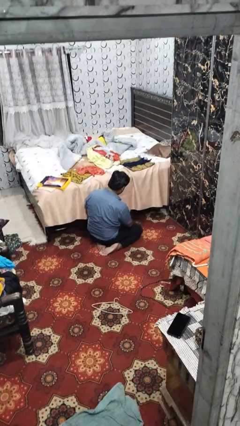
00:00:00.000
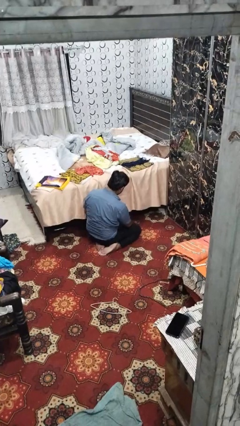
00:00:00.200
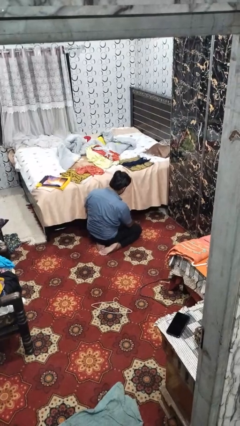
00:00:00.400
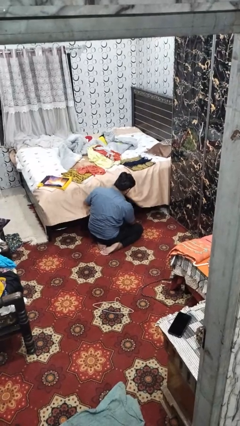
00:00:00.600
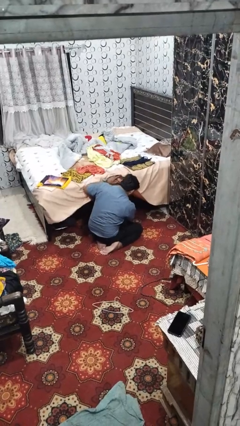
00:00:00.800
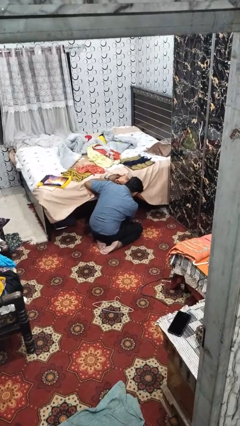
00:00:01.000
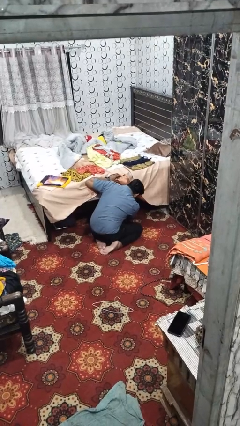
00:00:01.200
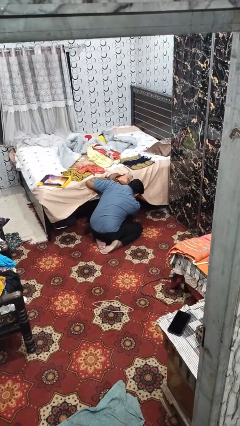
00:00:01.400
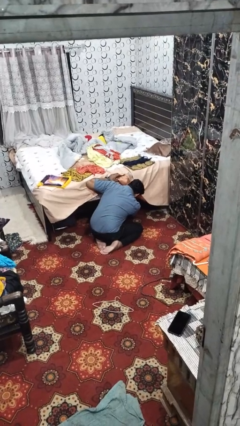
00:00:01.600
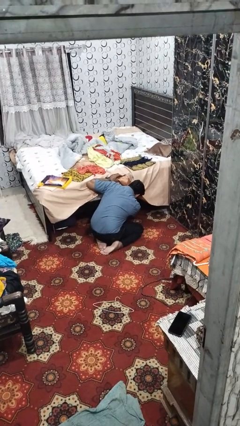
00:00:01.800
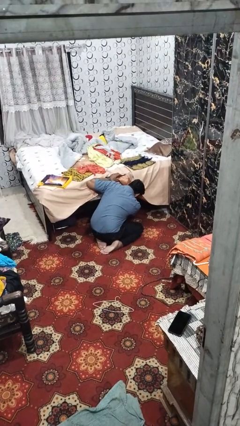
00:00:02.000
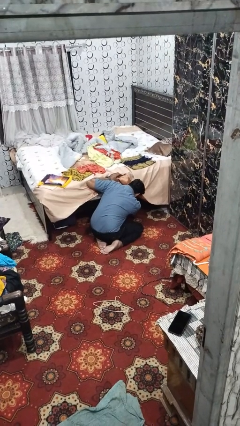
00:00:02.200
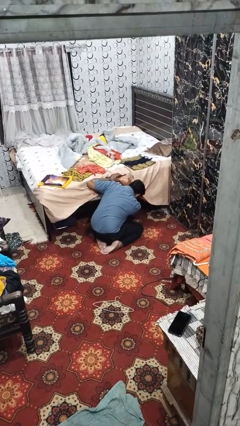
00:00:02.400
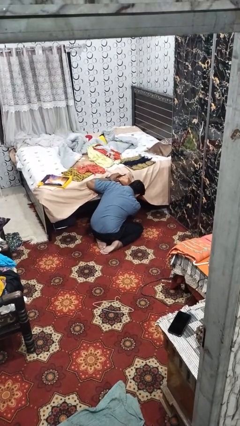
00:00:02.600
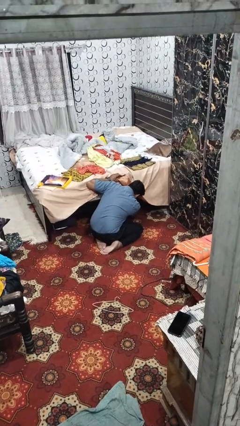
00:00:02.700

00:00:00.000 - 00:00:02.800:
person searches under bed

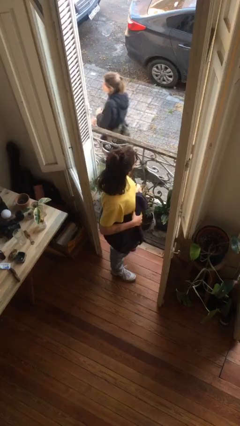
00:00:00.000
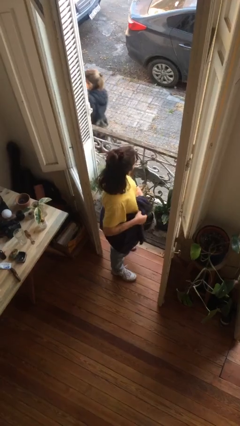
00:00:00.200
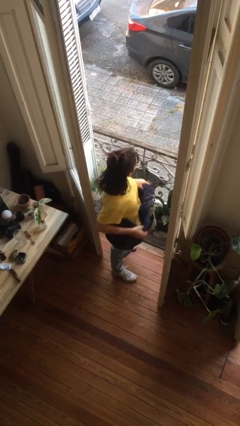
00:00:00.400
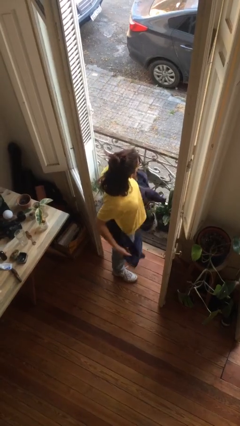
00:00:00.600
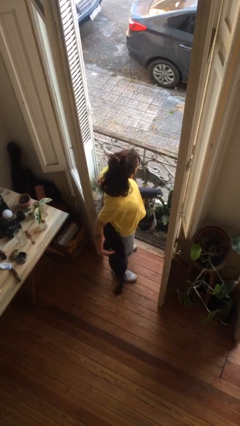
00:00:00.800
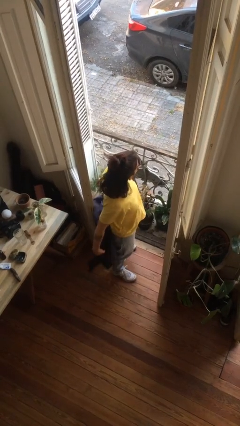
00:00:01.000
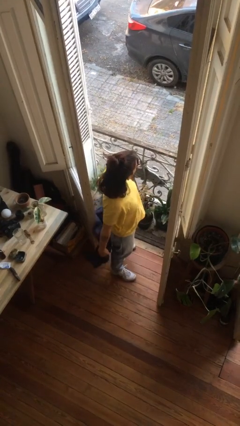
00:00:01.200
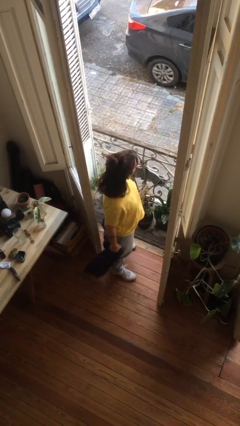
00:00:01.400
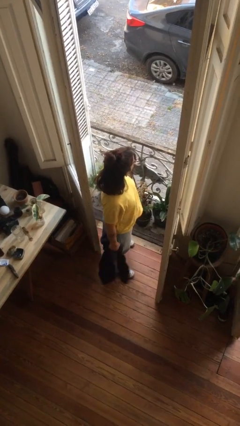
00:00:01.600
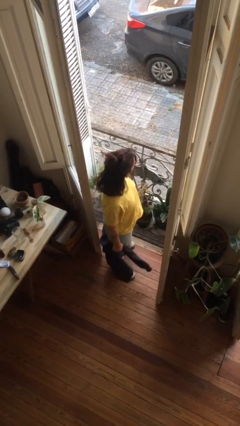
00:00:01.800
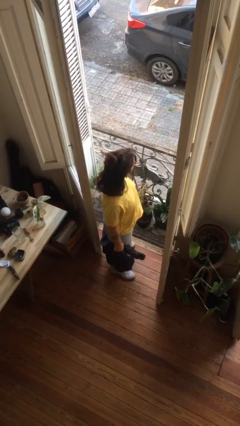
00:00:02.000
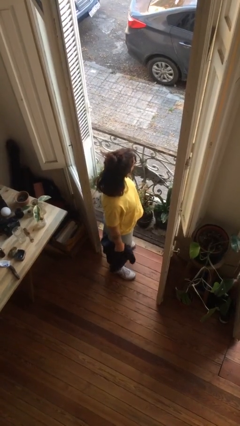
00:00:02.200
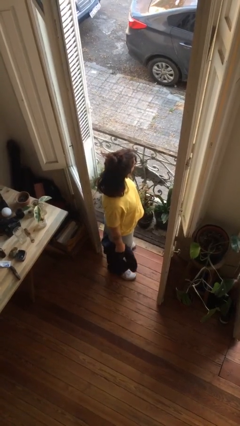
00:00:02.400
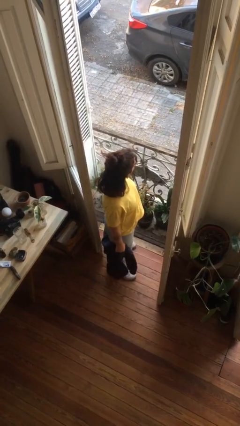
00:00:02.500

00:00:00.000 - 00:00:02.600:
person unties jacket around waist

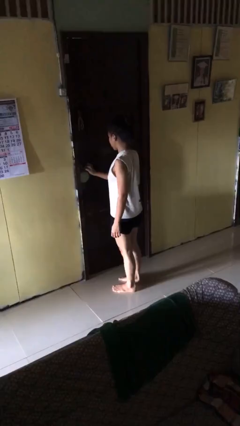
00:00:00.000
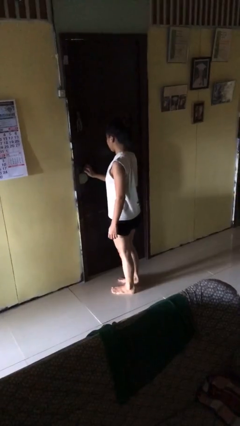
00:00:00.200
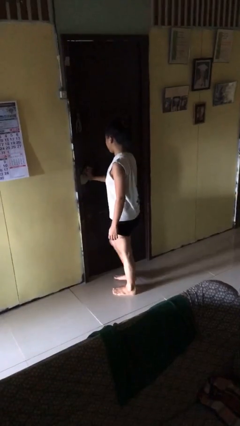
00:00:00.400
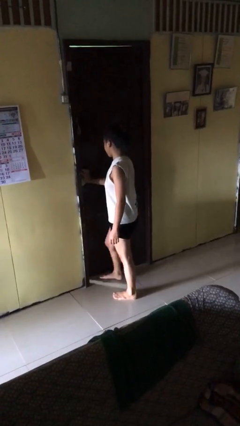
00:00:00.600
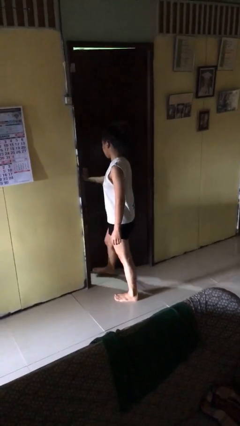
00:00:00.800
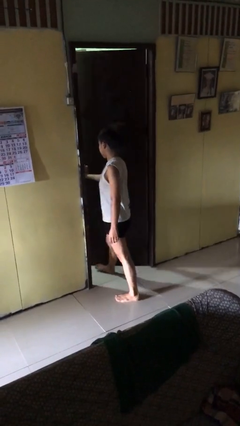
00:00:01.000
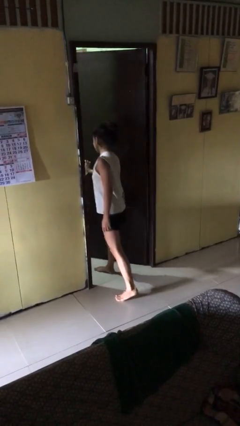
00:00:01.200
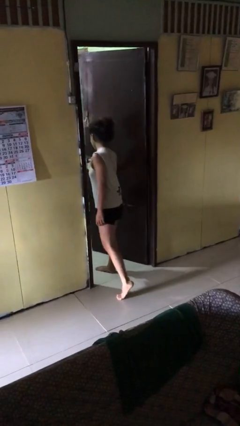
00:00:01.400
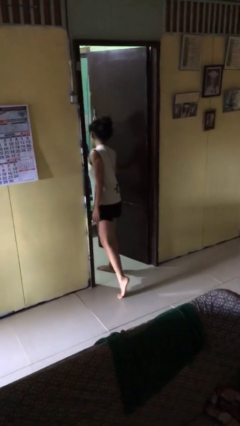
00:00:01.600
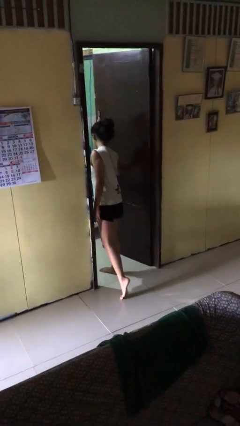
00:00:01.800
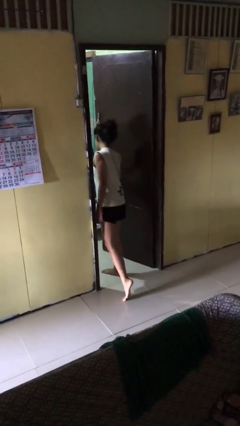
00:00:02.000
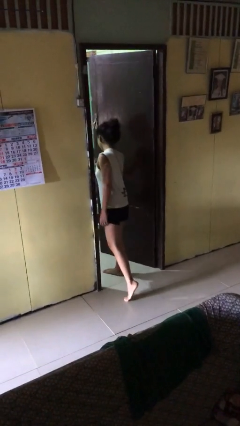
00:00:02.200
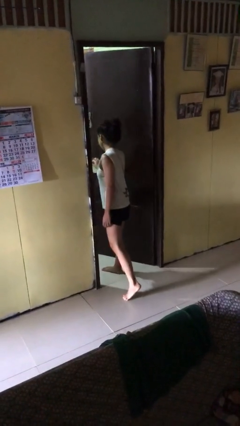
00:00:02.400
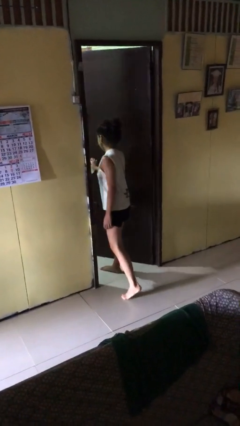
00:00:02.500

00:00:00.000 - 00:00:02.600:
person opens facility door

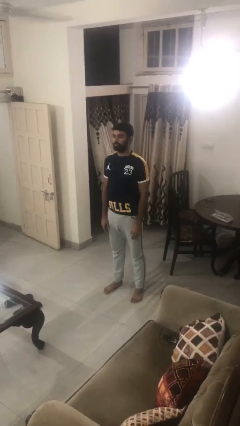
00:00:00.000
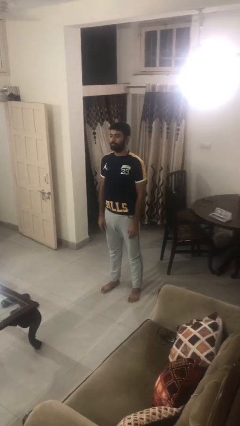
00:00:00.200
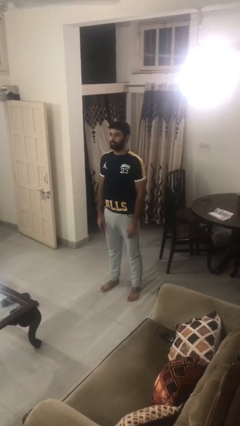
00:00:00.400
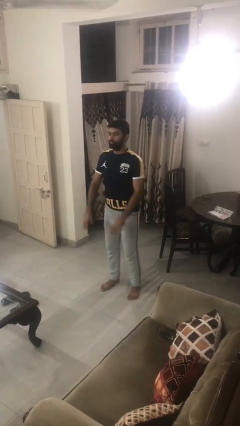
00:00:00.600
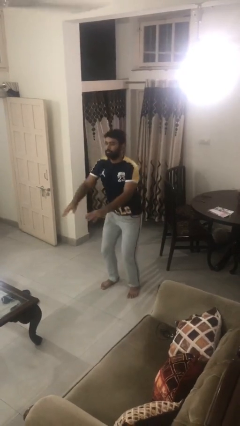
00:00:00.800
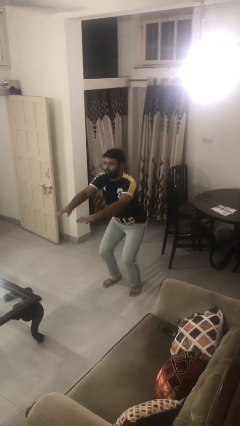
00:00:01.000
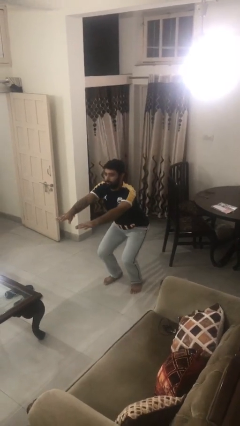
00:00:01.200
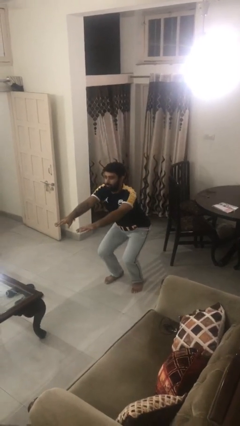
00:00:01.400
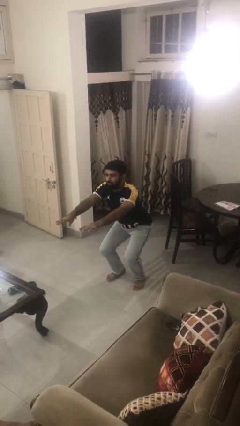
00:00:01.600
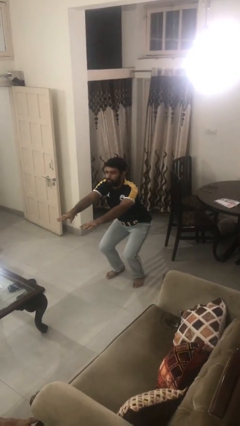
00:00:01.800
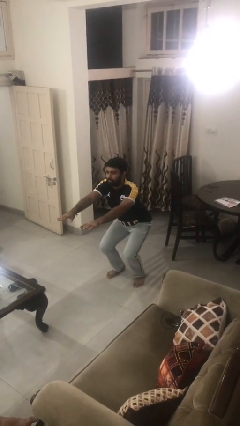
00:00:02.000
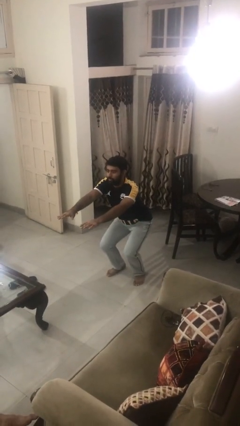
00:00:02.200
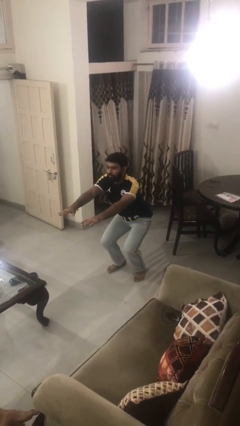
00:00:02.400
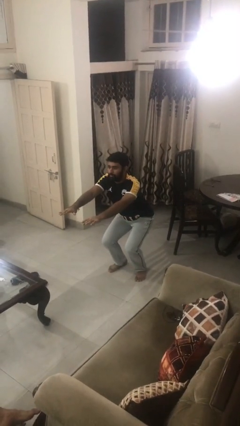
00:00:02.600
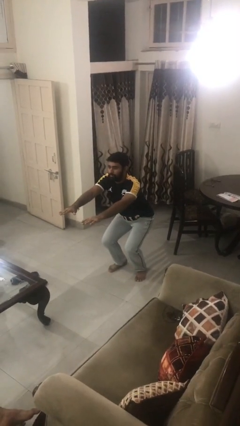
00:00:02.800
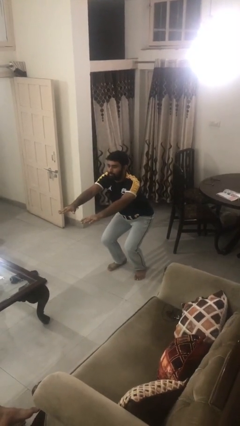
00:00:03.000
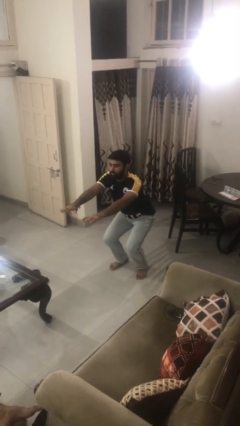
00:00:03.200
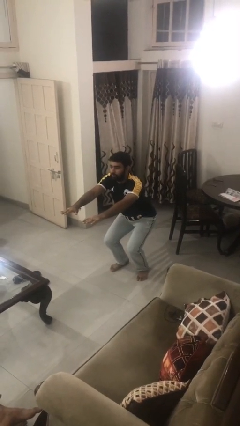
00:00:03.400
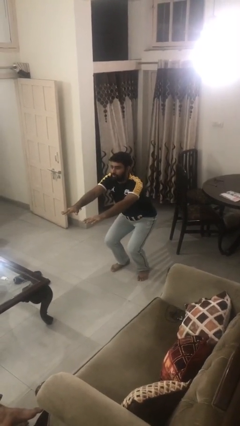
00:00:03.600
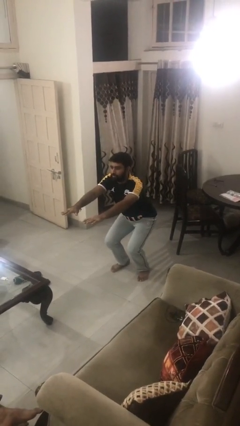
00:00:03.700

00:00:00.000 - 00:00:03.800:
person squats

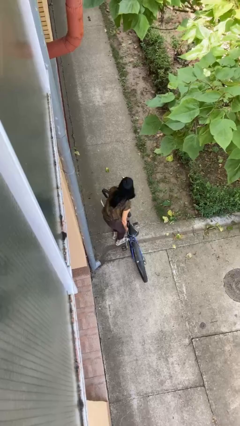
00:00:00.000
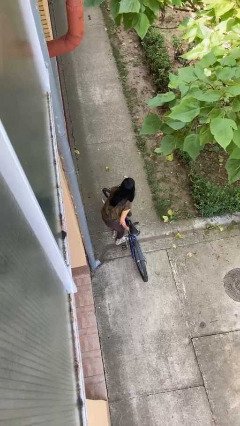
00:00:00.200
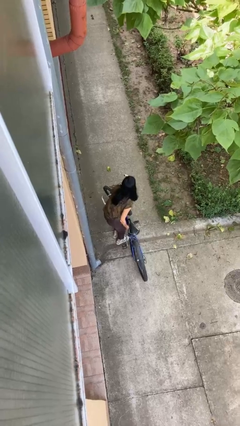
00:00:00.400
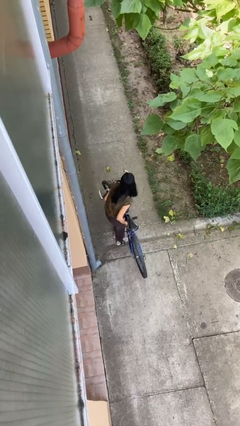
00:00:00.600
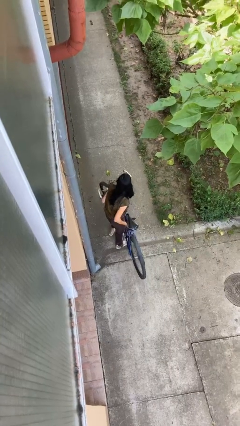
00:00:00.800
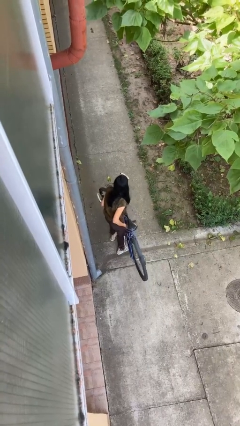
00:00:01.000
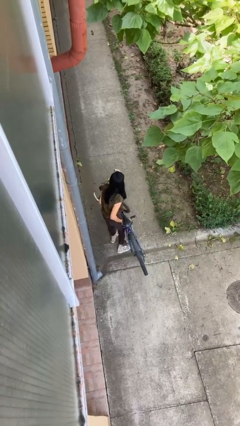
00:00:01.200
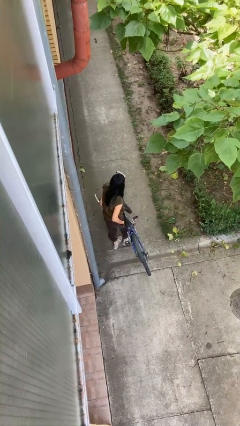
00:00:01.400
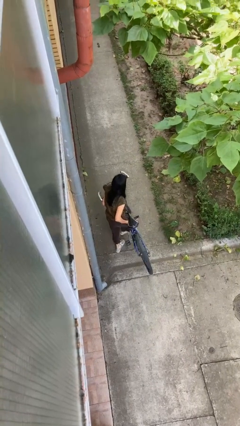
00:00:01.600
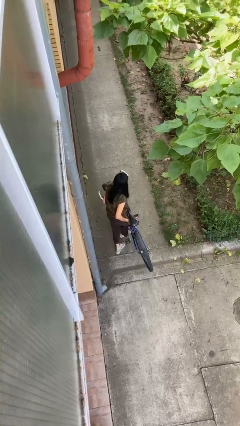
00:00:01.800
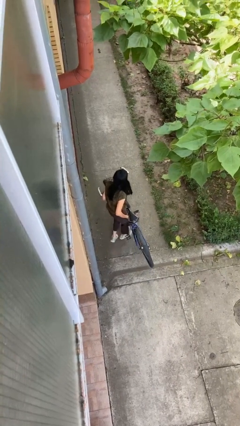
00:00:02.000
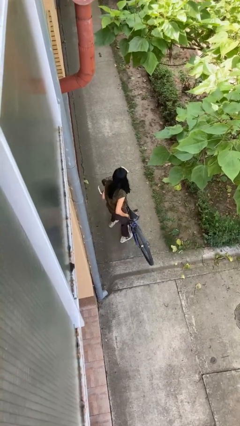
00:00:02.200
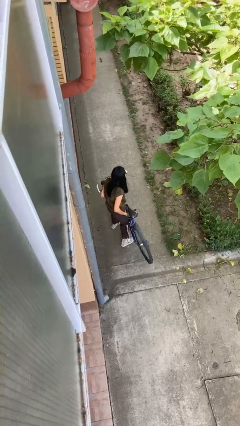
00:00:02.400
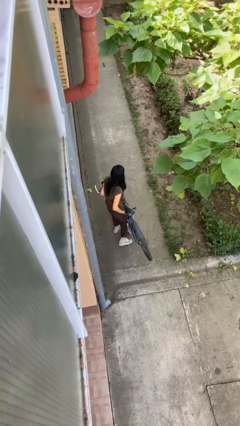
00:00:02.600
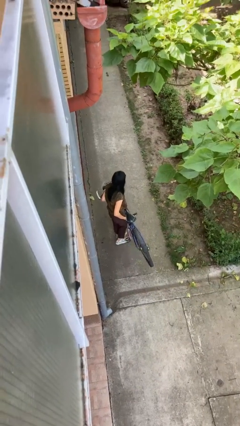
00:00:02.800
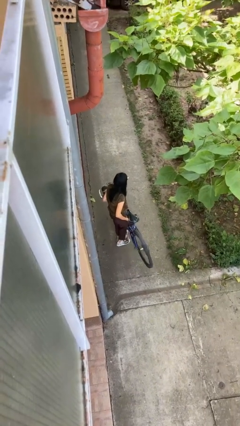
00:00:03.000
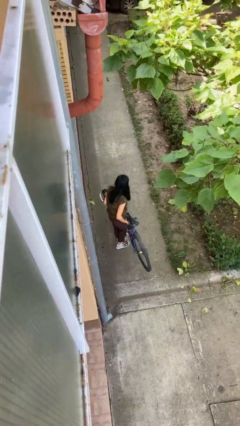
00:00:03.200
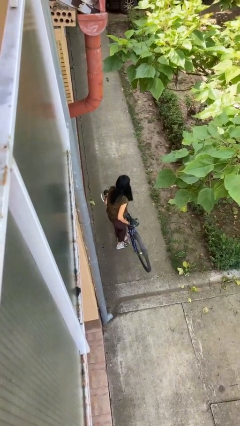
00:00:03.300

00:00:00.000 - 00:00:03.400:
person carries bicycle

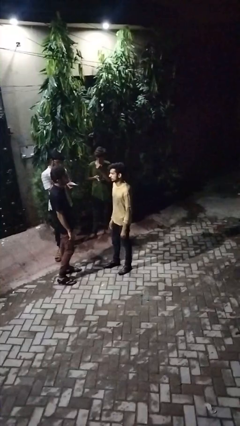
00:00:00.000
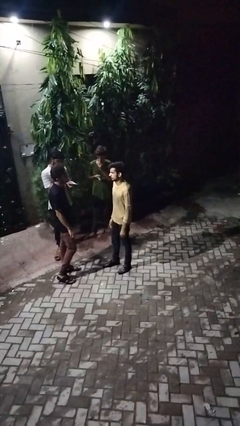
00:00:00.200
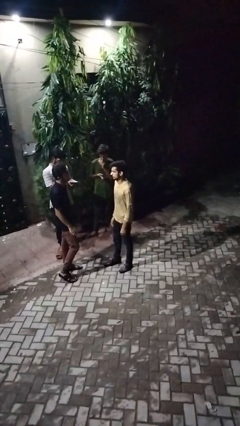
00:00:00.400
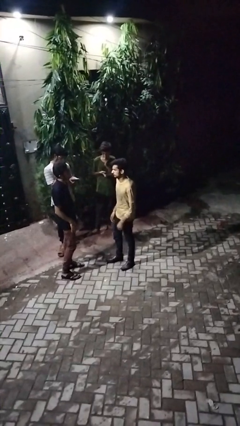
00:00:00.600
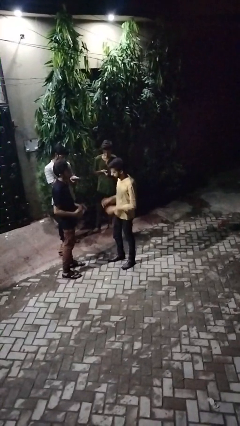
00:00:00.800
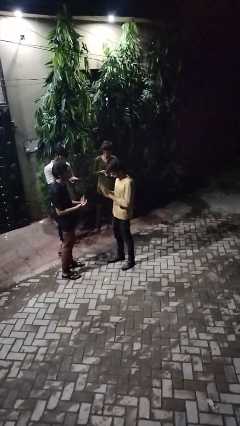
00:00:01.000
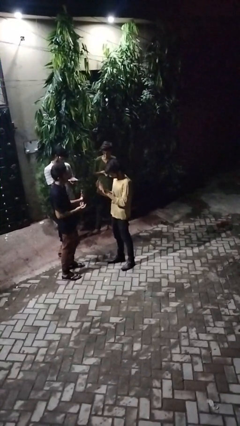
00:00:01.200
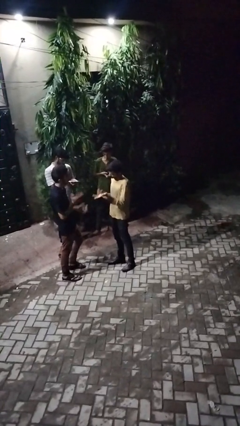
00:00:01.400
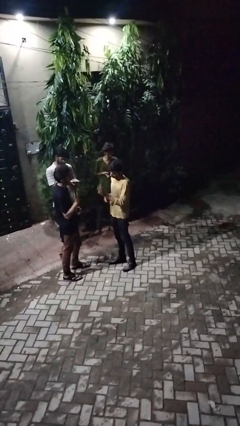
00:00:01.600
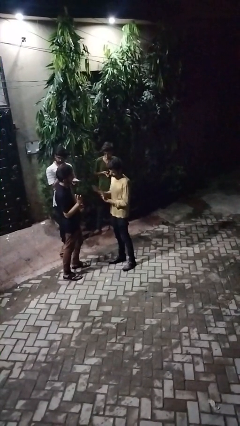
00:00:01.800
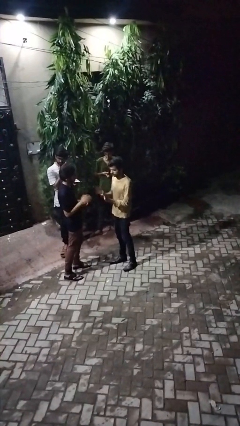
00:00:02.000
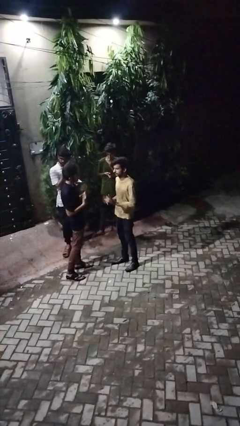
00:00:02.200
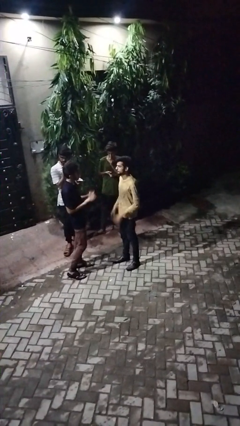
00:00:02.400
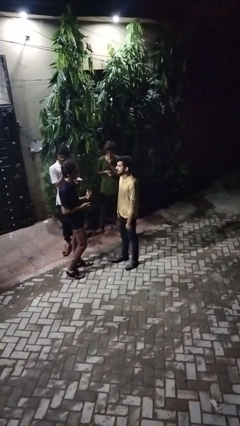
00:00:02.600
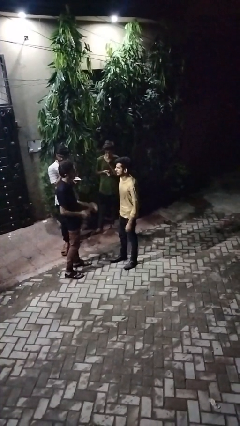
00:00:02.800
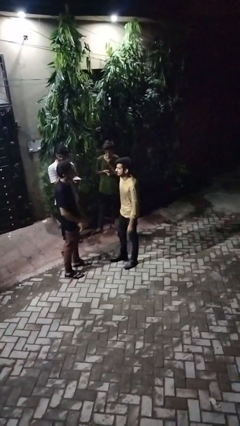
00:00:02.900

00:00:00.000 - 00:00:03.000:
person talks to person
